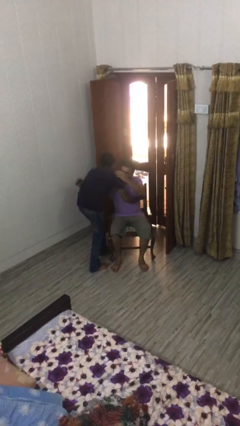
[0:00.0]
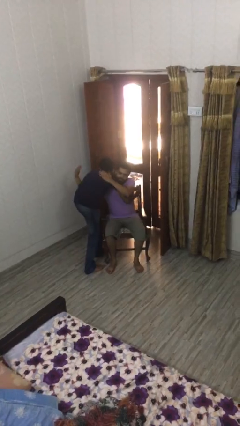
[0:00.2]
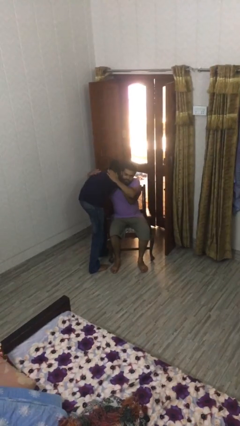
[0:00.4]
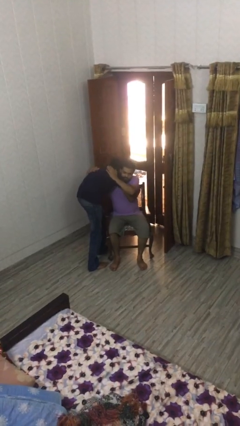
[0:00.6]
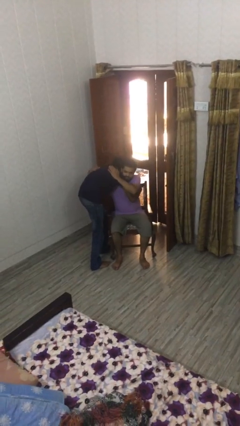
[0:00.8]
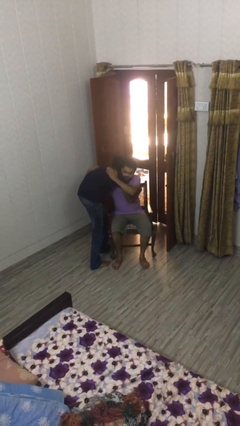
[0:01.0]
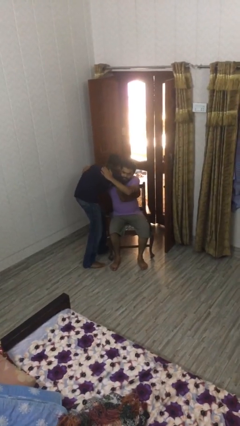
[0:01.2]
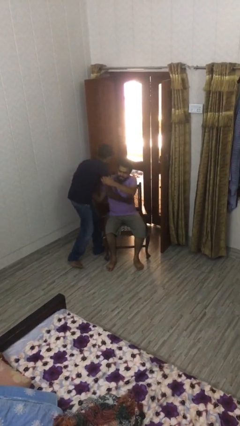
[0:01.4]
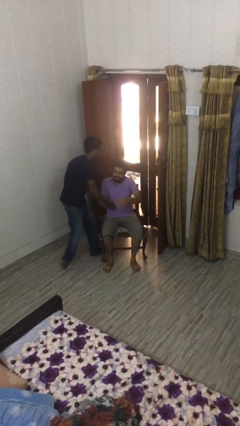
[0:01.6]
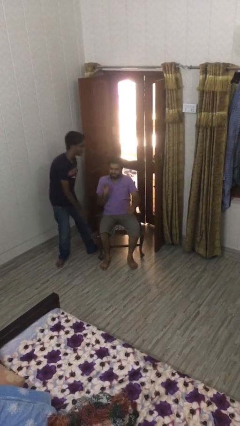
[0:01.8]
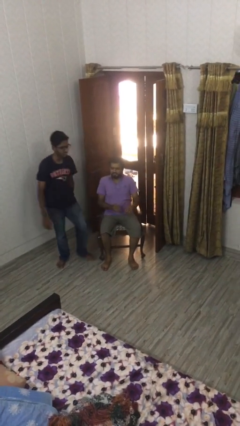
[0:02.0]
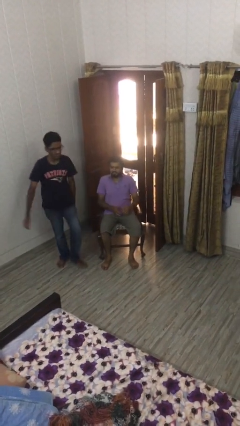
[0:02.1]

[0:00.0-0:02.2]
person embraces person

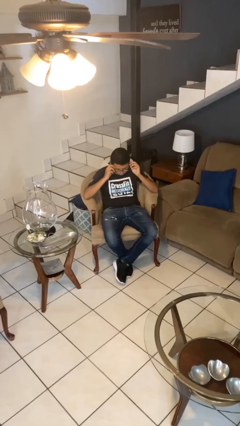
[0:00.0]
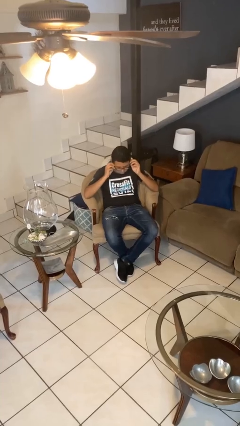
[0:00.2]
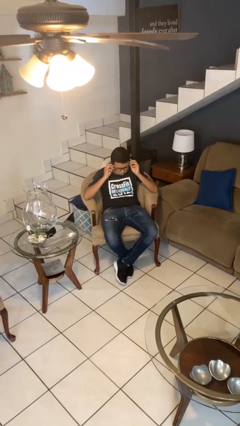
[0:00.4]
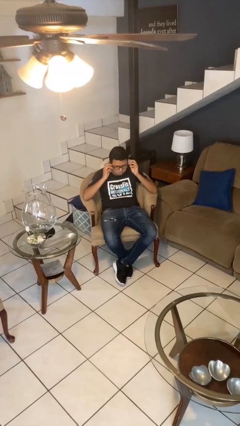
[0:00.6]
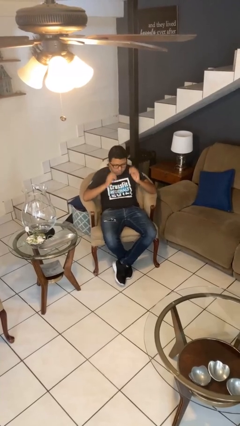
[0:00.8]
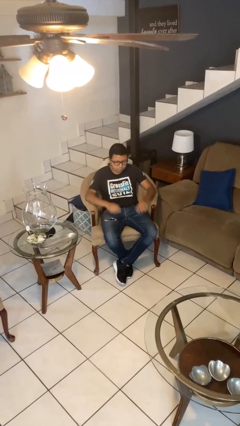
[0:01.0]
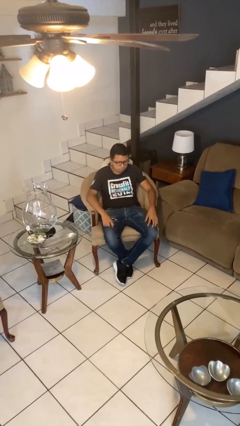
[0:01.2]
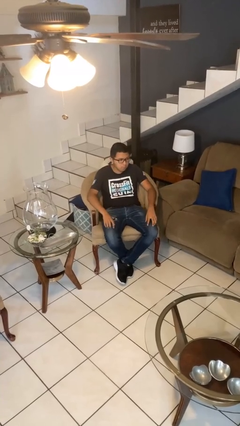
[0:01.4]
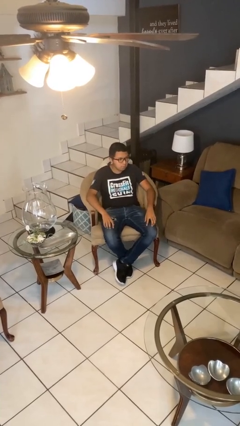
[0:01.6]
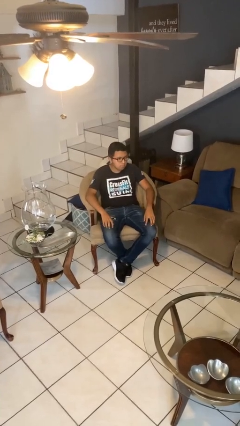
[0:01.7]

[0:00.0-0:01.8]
person puts on glasses

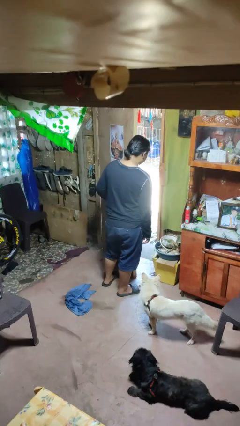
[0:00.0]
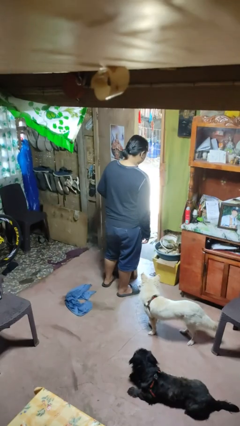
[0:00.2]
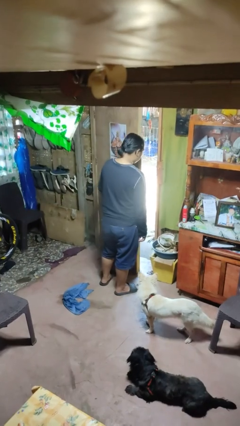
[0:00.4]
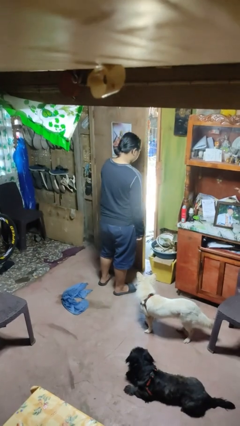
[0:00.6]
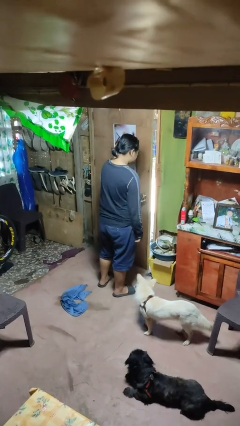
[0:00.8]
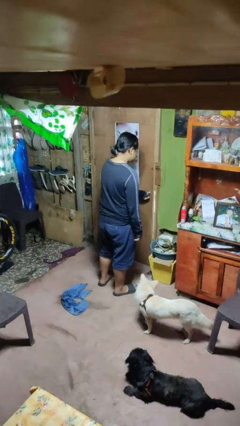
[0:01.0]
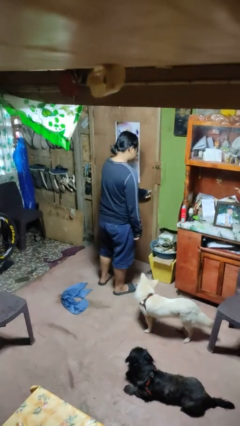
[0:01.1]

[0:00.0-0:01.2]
person closes facility door

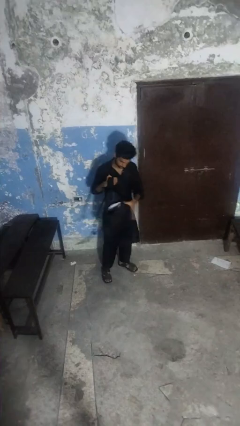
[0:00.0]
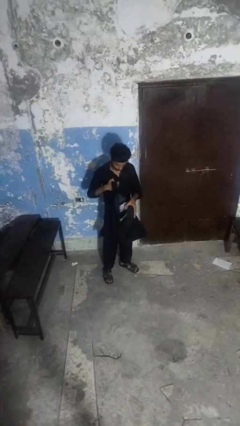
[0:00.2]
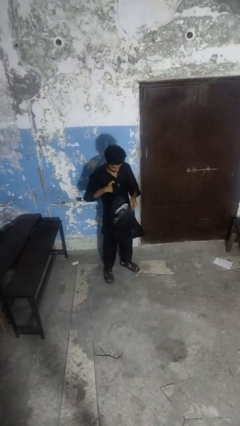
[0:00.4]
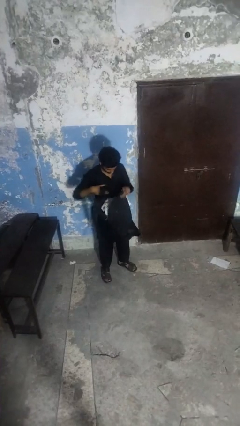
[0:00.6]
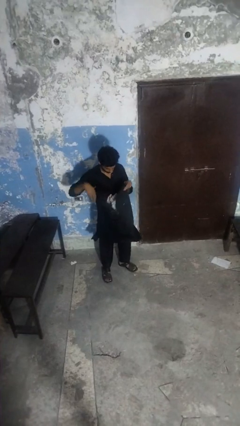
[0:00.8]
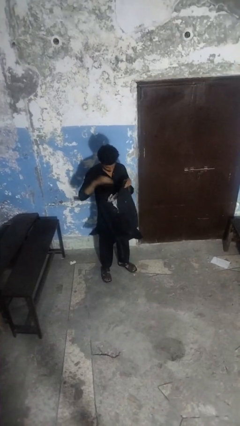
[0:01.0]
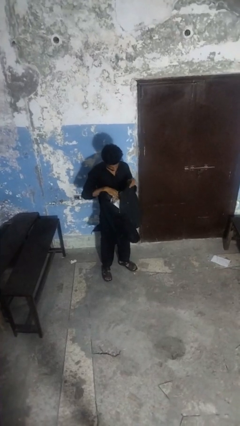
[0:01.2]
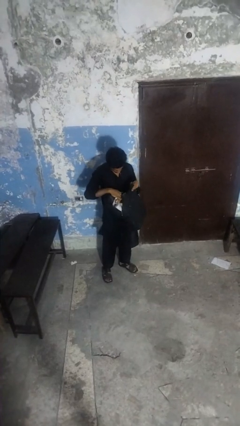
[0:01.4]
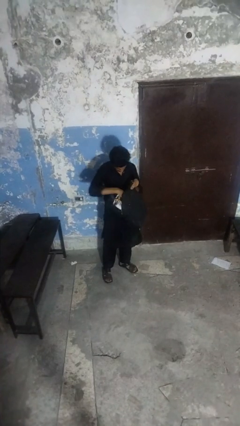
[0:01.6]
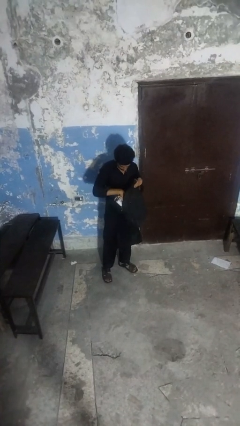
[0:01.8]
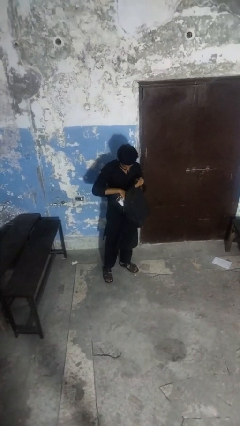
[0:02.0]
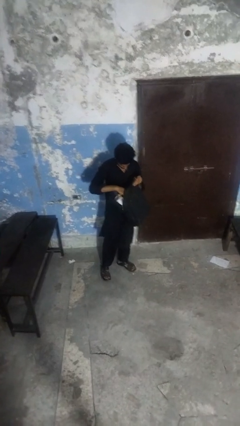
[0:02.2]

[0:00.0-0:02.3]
person searches in backpack

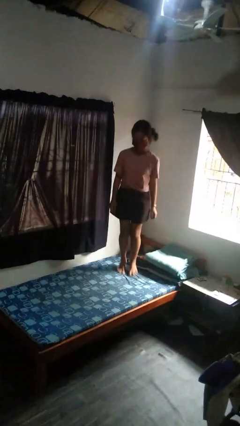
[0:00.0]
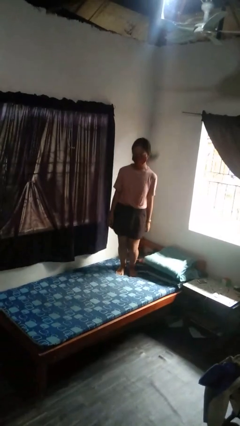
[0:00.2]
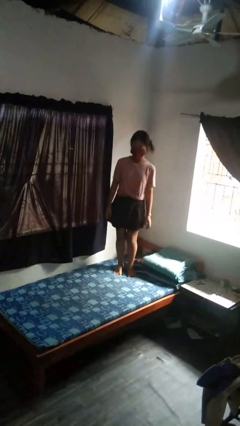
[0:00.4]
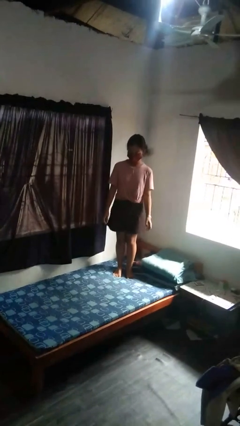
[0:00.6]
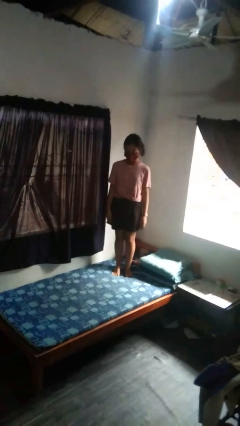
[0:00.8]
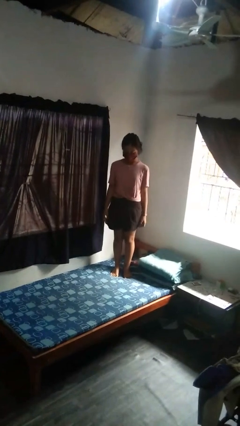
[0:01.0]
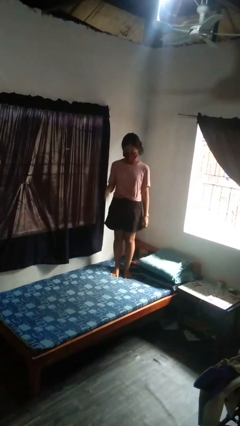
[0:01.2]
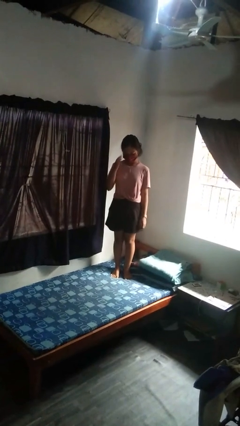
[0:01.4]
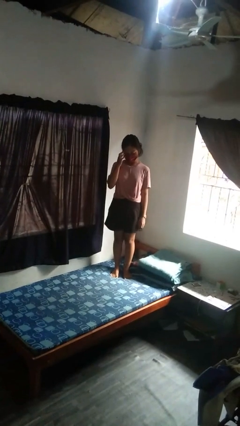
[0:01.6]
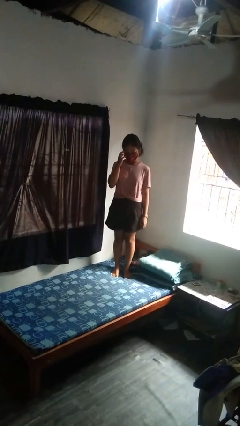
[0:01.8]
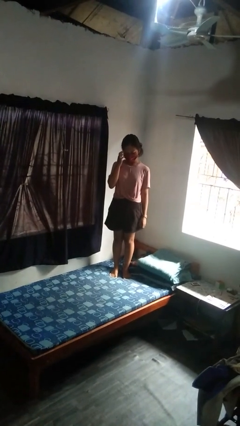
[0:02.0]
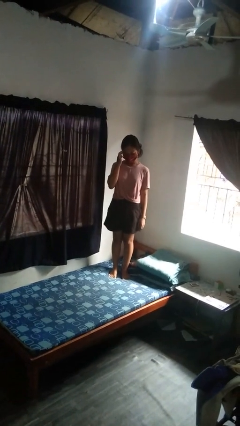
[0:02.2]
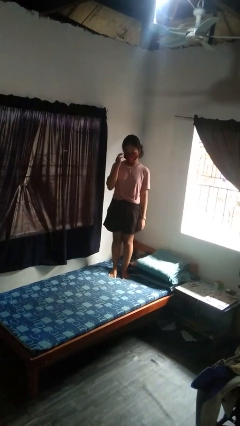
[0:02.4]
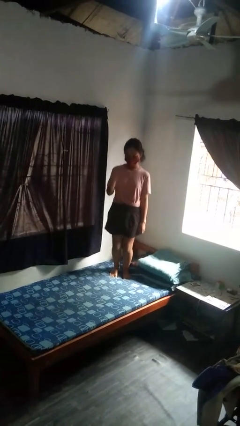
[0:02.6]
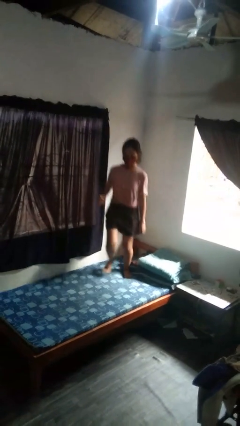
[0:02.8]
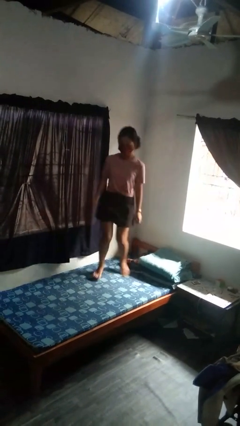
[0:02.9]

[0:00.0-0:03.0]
person jumps on bed

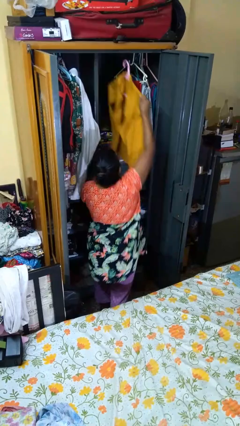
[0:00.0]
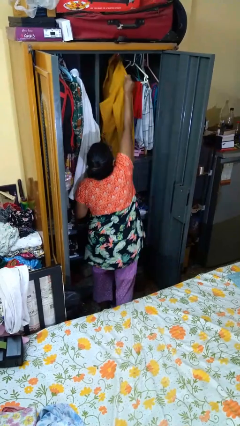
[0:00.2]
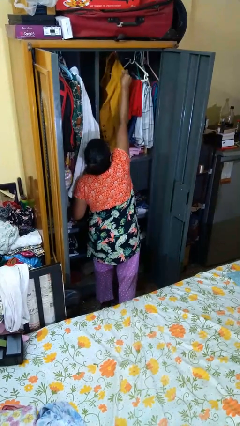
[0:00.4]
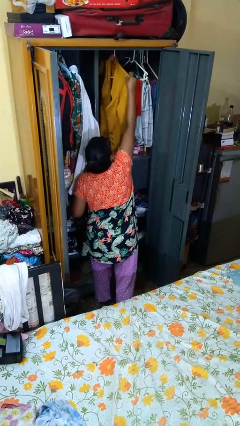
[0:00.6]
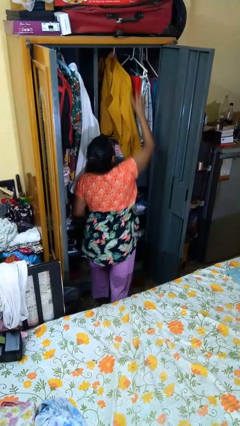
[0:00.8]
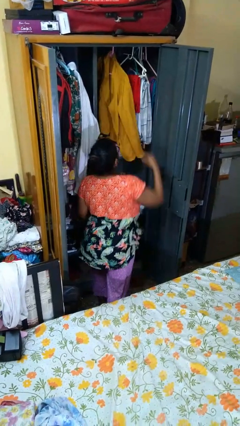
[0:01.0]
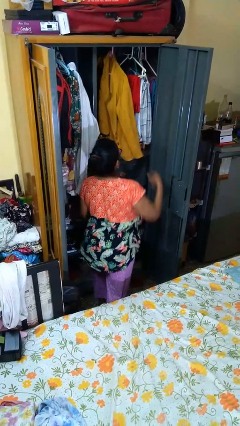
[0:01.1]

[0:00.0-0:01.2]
person puts clothes into closet

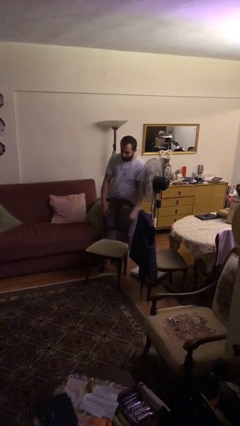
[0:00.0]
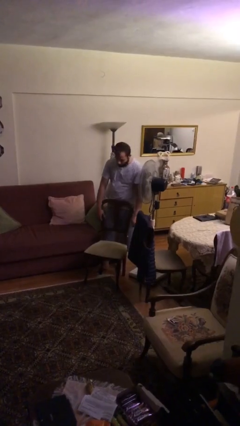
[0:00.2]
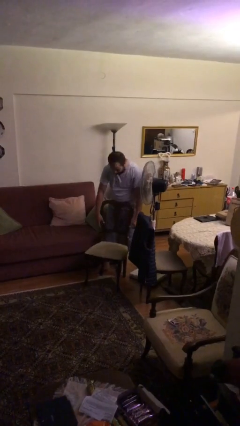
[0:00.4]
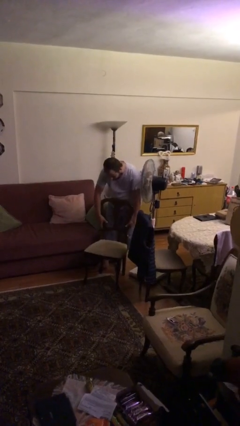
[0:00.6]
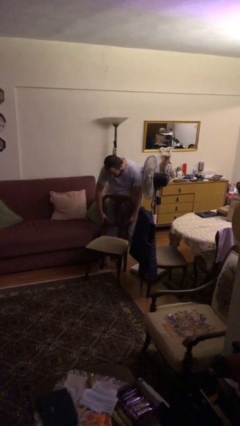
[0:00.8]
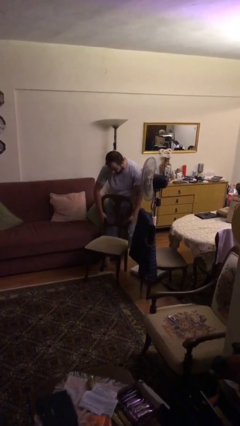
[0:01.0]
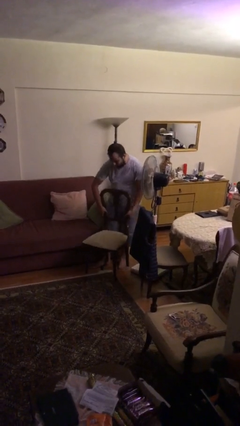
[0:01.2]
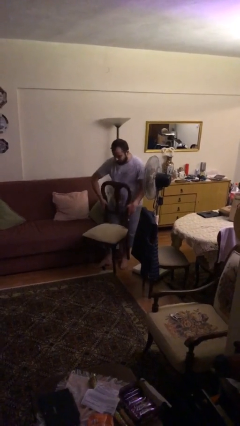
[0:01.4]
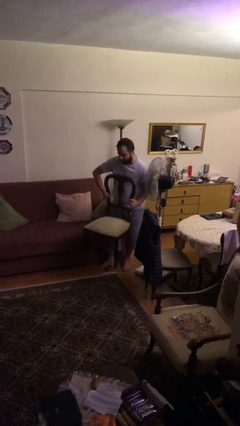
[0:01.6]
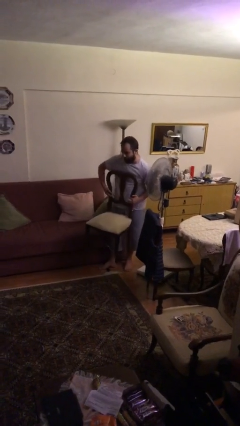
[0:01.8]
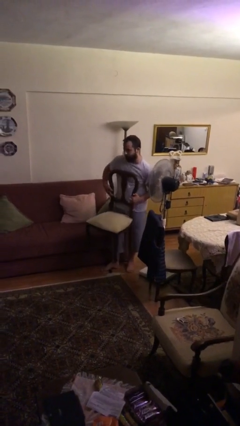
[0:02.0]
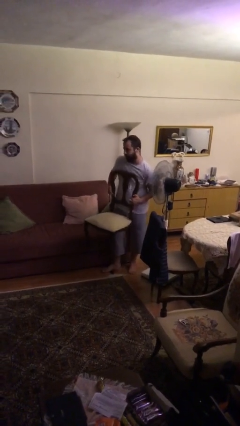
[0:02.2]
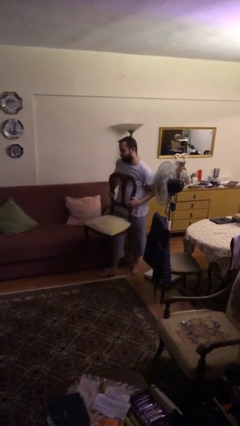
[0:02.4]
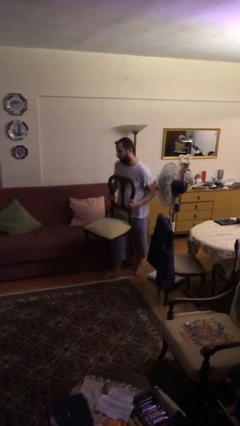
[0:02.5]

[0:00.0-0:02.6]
person picks up object from floor

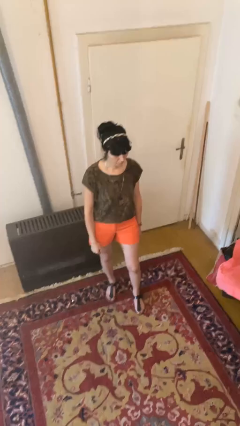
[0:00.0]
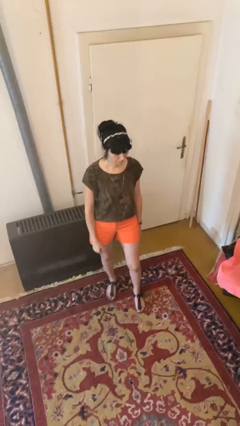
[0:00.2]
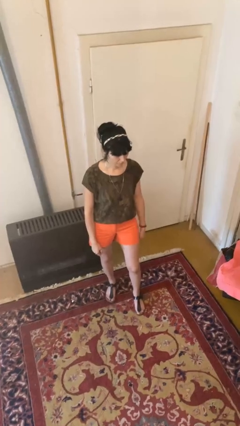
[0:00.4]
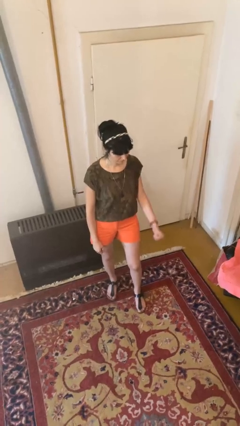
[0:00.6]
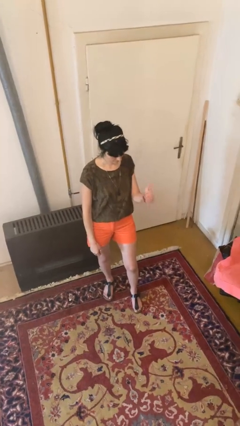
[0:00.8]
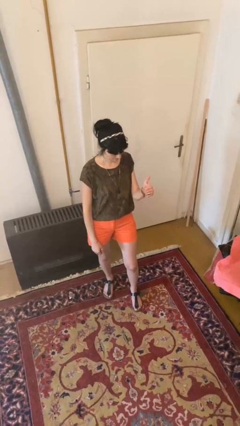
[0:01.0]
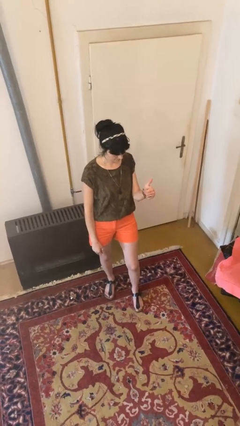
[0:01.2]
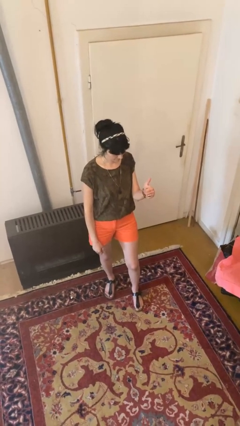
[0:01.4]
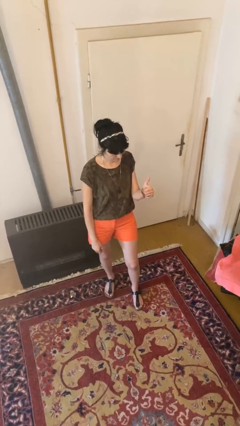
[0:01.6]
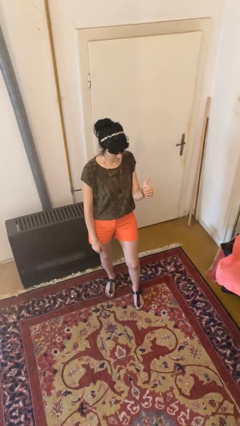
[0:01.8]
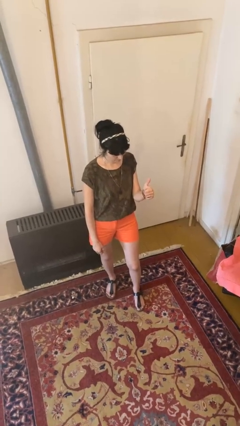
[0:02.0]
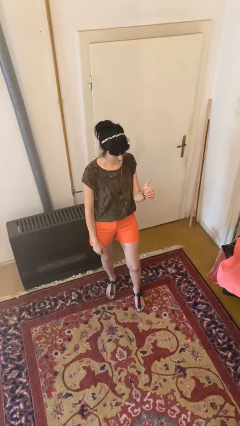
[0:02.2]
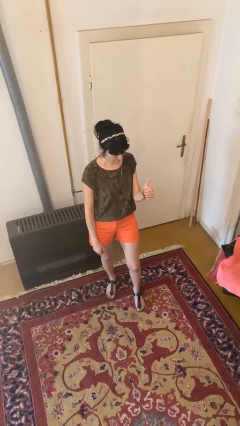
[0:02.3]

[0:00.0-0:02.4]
person gestures thumbs up
